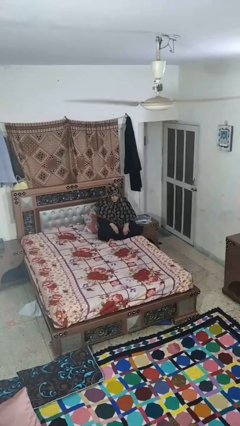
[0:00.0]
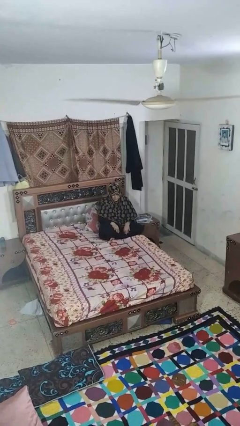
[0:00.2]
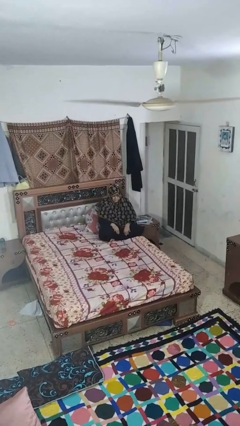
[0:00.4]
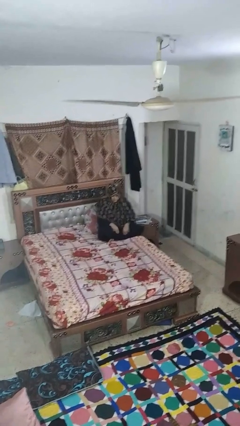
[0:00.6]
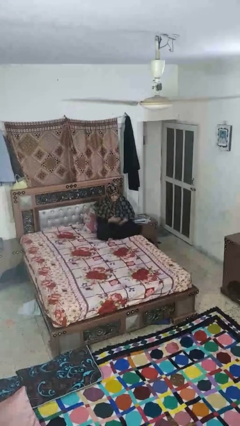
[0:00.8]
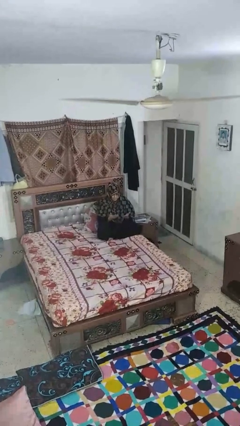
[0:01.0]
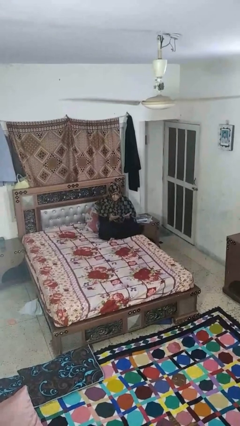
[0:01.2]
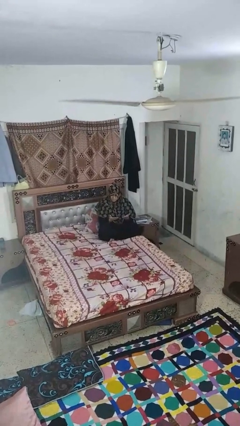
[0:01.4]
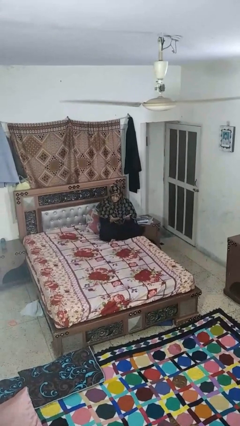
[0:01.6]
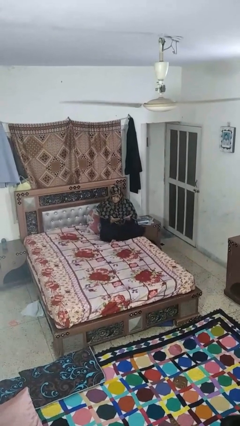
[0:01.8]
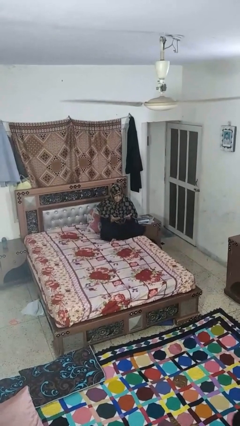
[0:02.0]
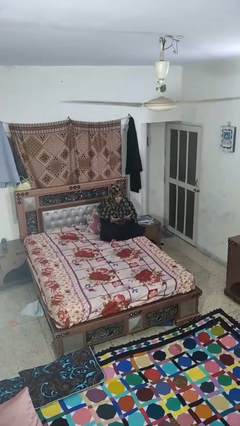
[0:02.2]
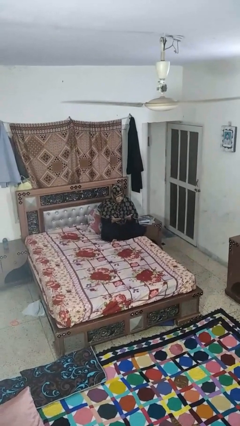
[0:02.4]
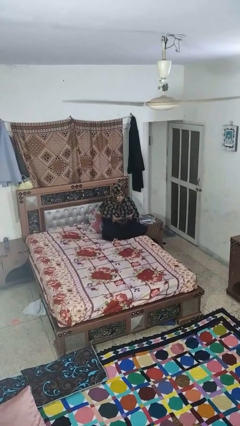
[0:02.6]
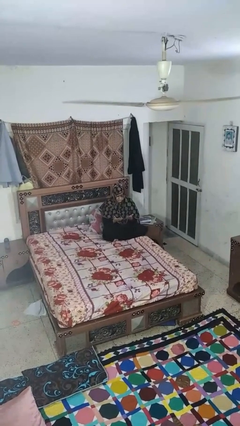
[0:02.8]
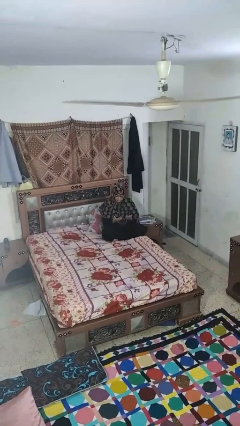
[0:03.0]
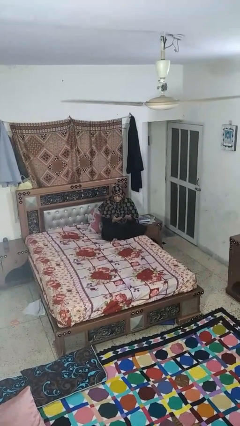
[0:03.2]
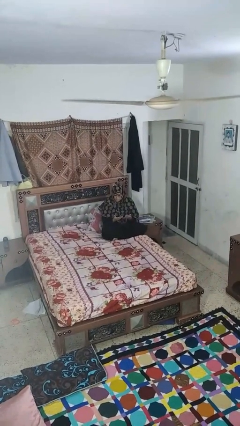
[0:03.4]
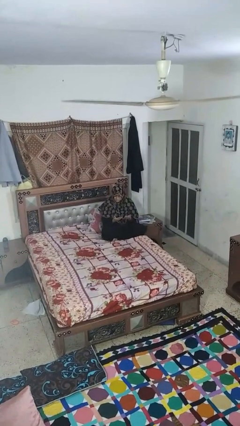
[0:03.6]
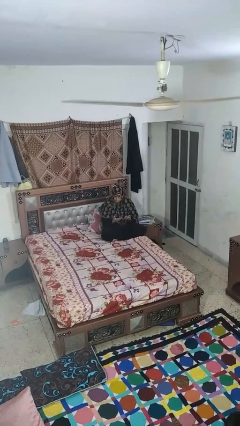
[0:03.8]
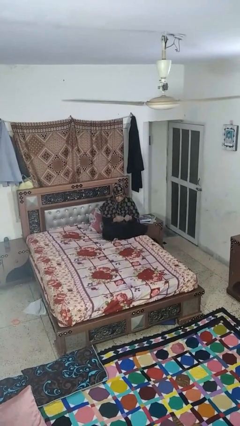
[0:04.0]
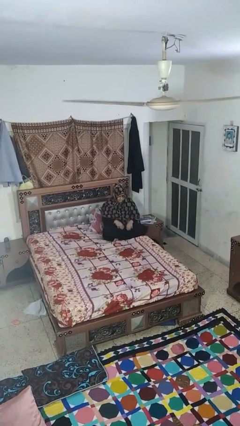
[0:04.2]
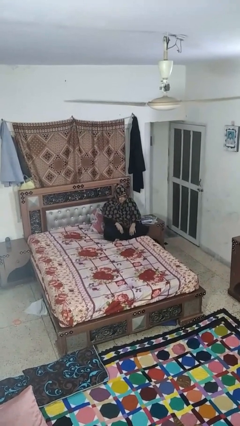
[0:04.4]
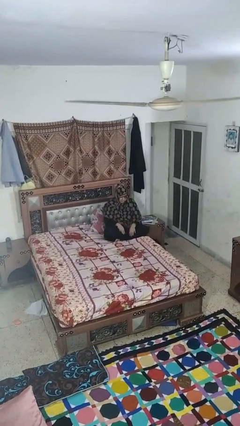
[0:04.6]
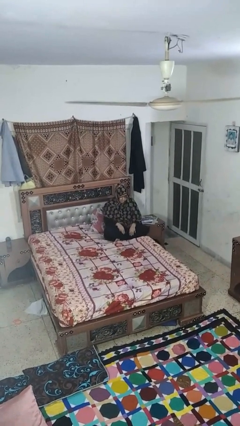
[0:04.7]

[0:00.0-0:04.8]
person looks at hands in lap

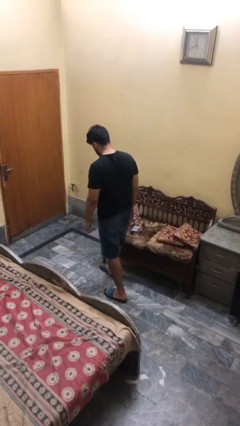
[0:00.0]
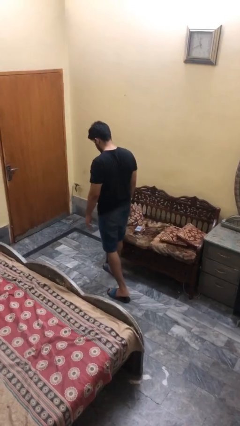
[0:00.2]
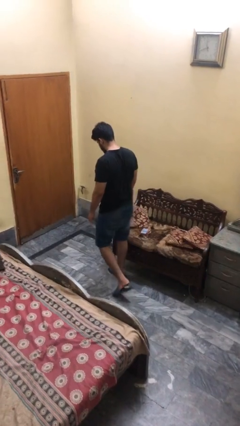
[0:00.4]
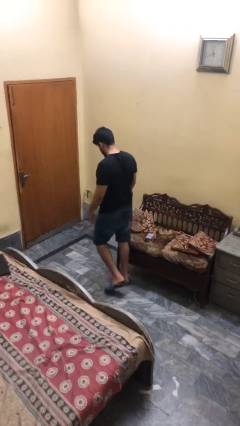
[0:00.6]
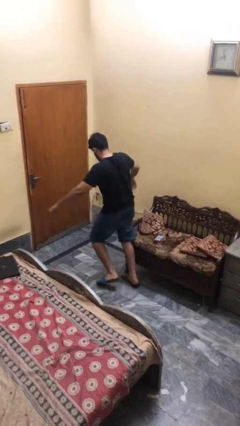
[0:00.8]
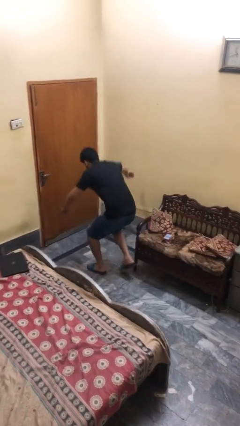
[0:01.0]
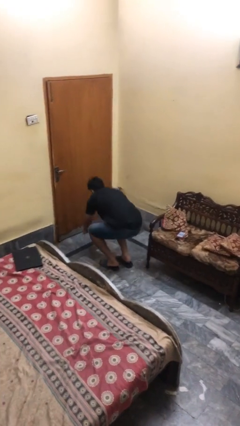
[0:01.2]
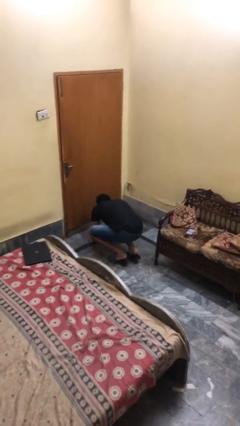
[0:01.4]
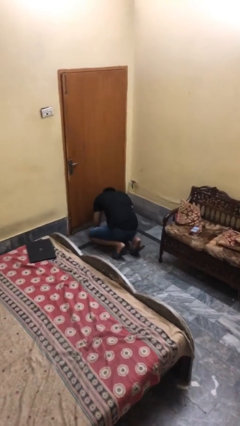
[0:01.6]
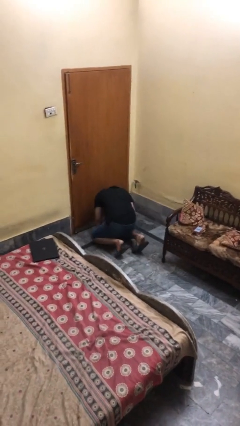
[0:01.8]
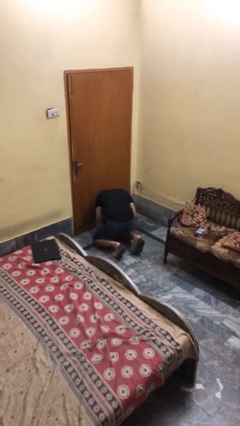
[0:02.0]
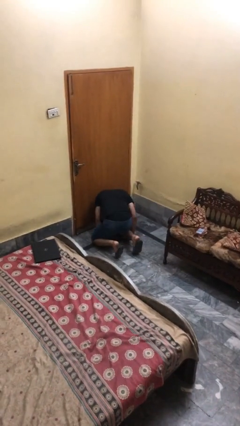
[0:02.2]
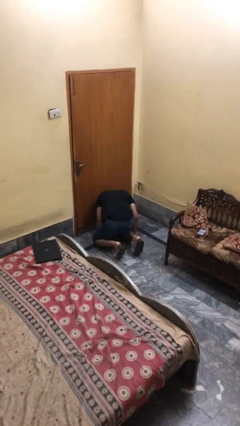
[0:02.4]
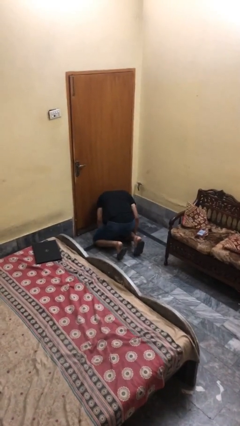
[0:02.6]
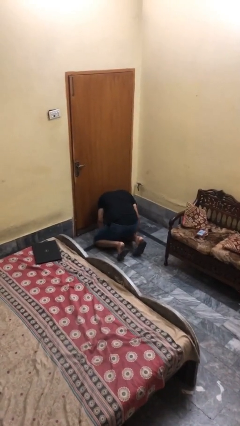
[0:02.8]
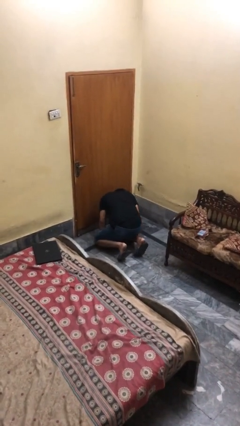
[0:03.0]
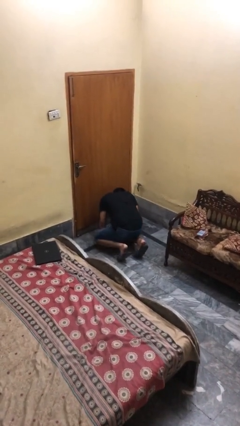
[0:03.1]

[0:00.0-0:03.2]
person trips on object on floor

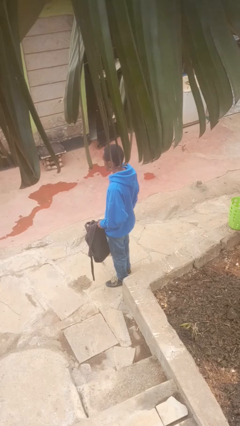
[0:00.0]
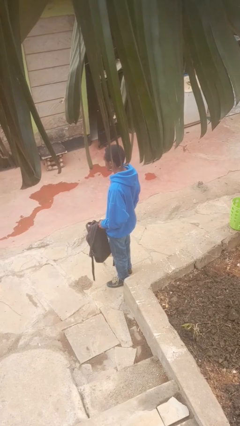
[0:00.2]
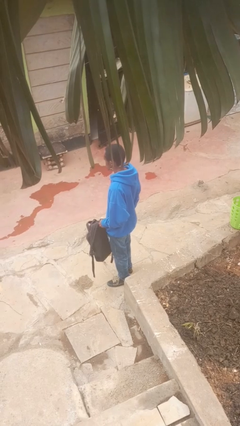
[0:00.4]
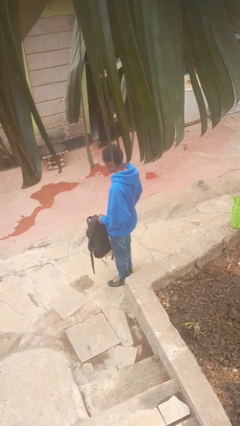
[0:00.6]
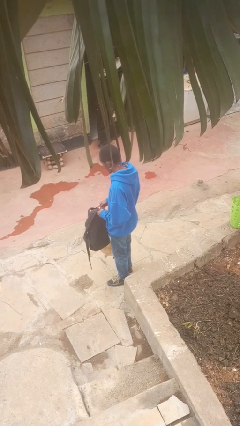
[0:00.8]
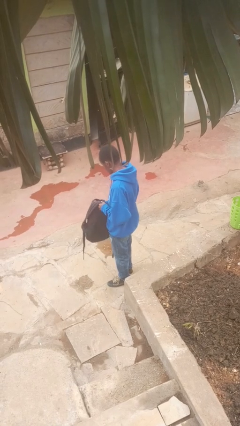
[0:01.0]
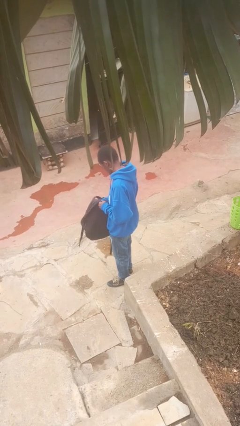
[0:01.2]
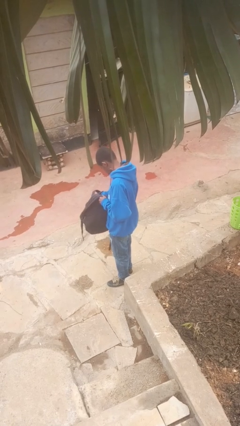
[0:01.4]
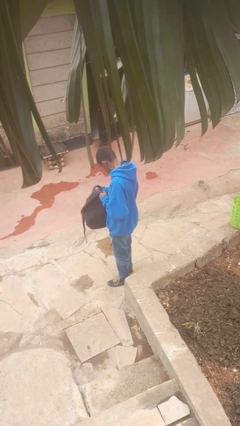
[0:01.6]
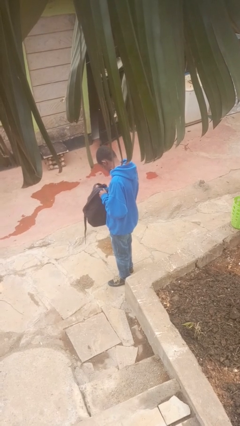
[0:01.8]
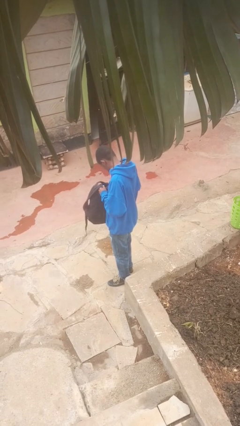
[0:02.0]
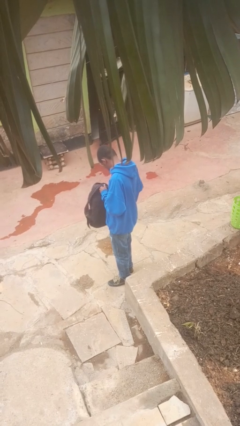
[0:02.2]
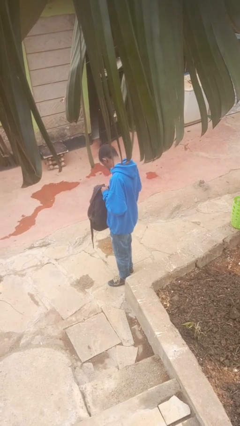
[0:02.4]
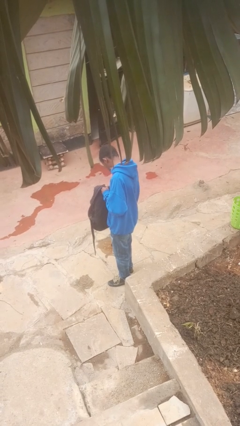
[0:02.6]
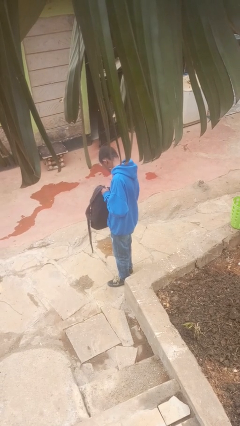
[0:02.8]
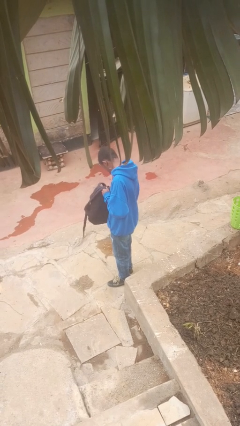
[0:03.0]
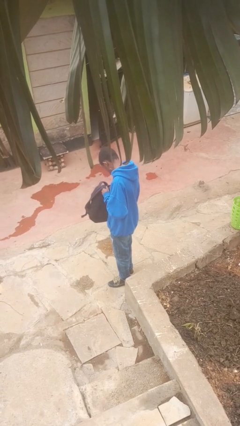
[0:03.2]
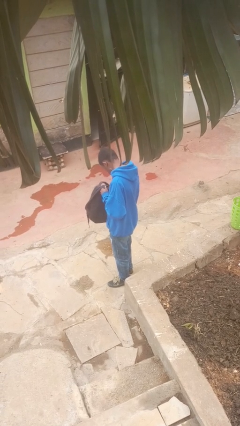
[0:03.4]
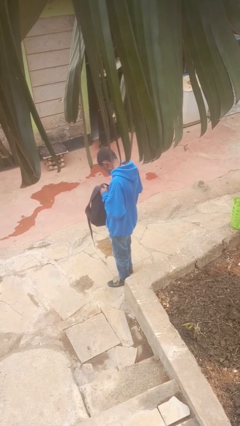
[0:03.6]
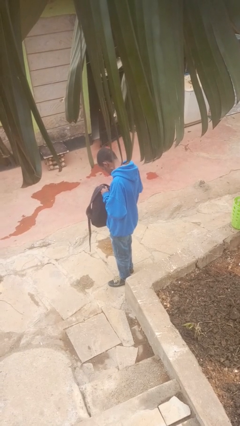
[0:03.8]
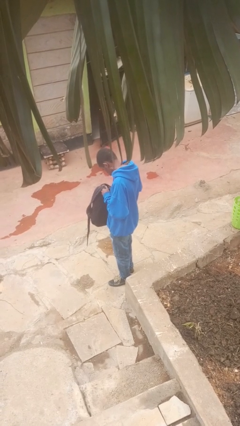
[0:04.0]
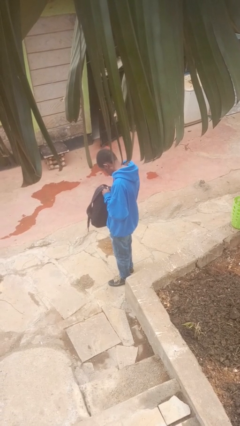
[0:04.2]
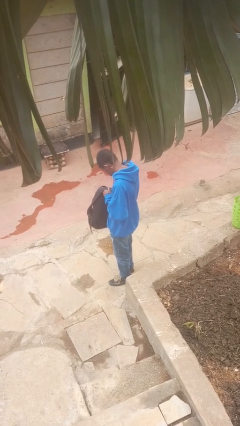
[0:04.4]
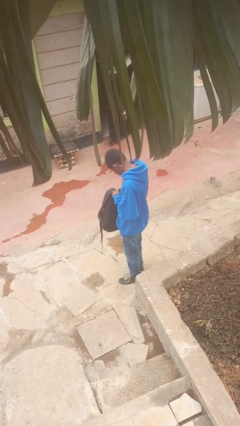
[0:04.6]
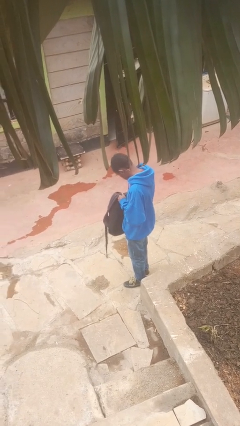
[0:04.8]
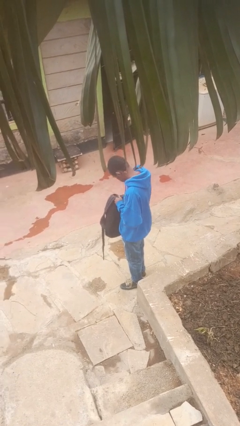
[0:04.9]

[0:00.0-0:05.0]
person searches in backpack

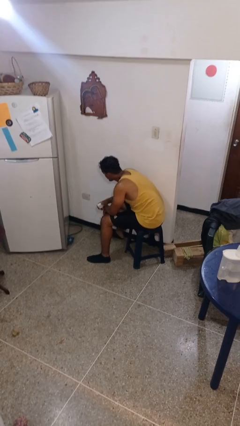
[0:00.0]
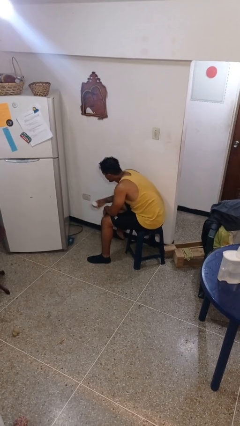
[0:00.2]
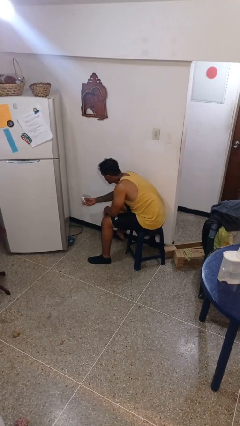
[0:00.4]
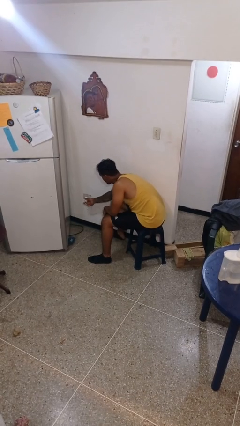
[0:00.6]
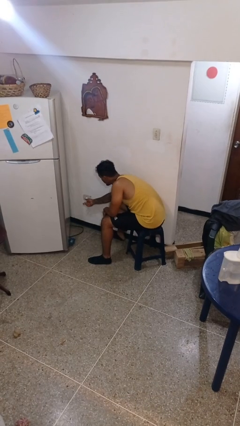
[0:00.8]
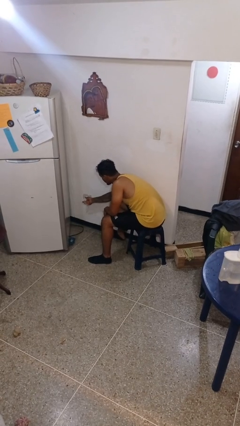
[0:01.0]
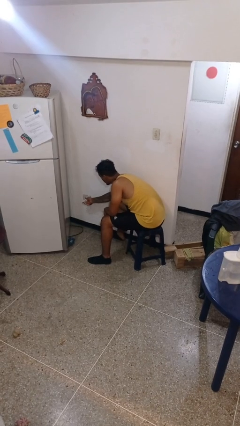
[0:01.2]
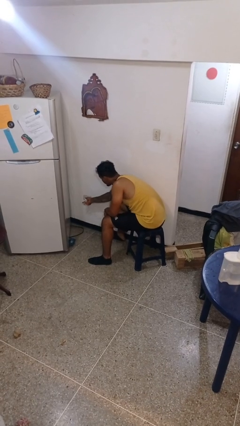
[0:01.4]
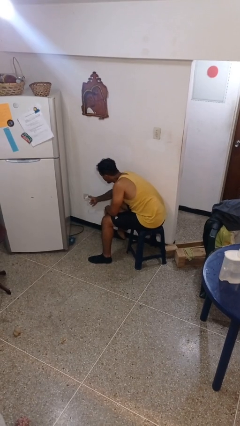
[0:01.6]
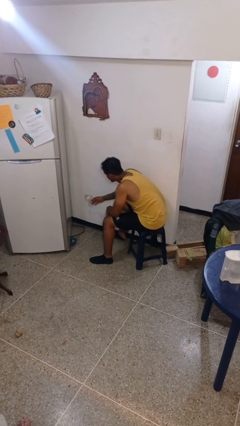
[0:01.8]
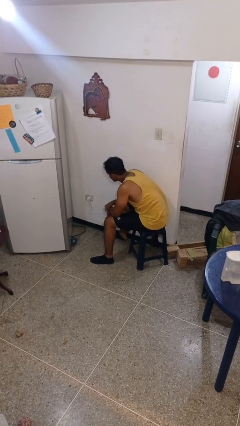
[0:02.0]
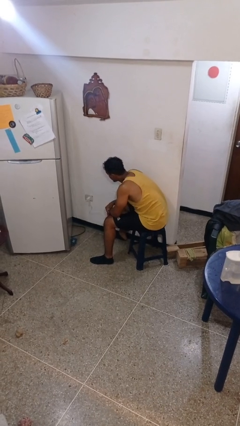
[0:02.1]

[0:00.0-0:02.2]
person plugs into electrical socket

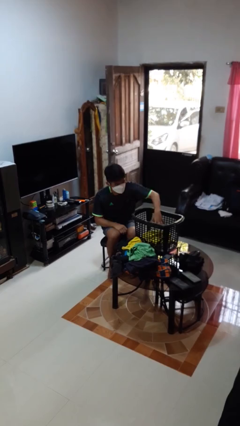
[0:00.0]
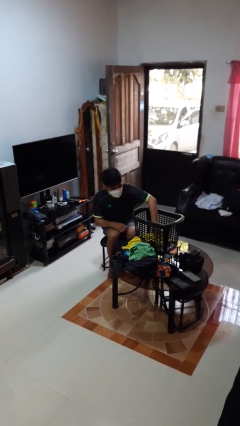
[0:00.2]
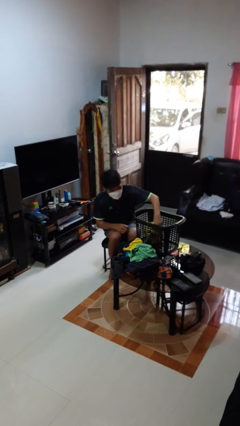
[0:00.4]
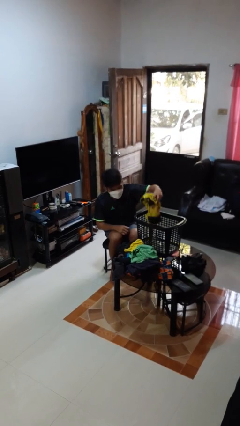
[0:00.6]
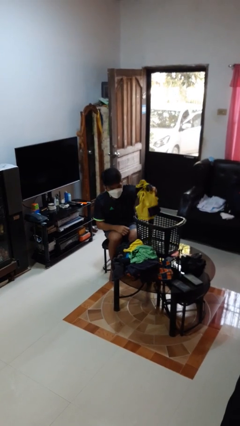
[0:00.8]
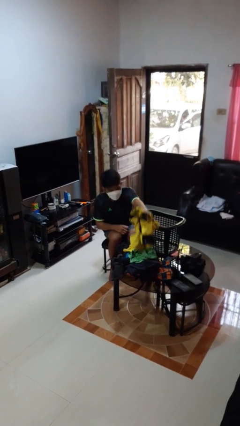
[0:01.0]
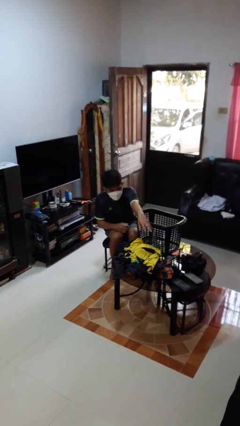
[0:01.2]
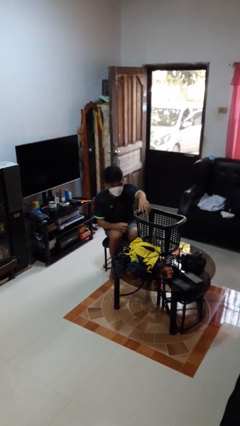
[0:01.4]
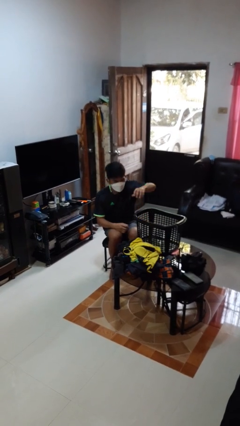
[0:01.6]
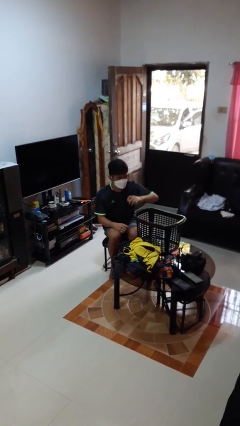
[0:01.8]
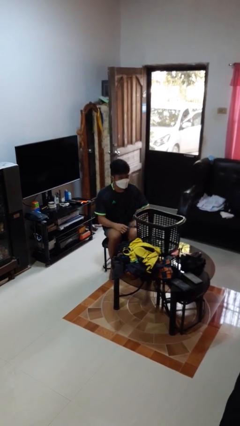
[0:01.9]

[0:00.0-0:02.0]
person takes object from basket

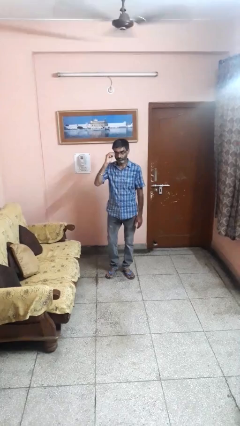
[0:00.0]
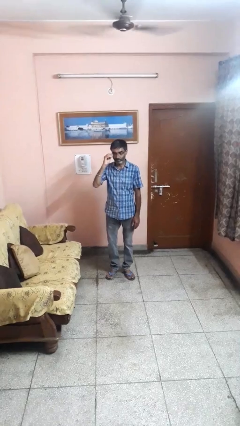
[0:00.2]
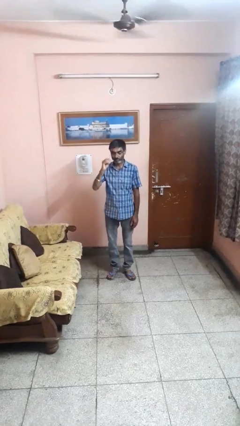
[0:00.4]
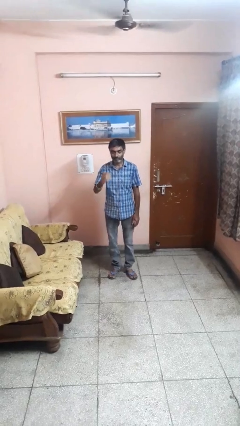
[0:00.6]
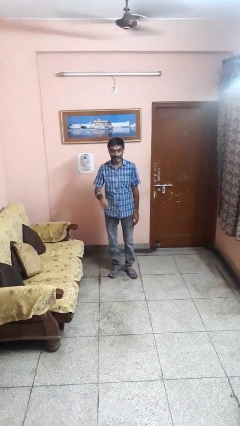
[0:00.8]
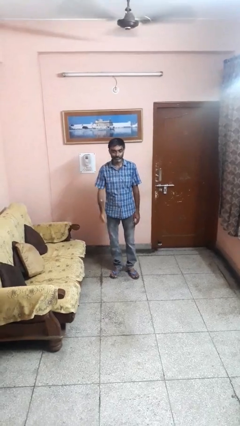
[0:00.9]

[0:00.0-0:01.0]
person takes off glasses
